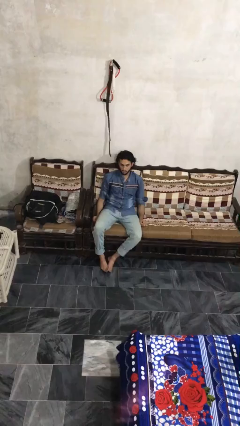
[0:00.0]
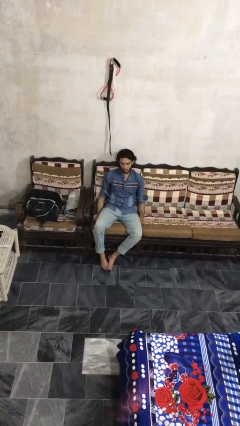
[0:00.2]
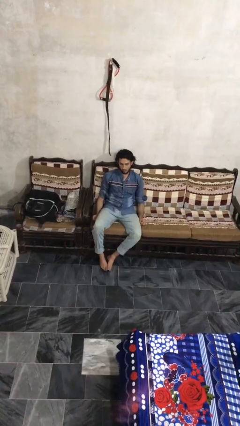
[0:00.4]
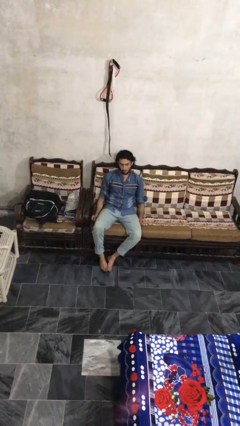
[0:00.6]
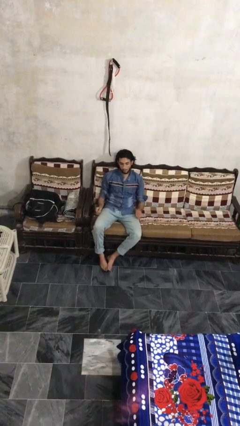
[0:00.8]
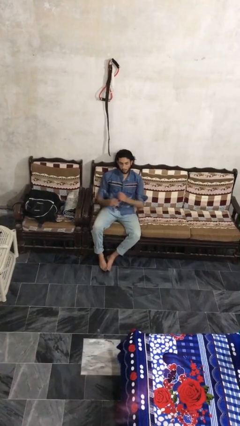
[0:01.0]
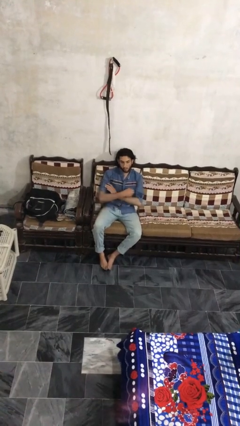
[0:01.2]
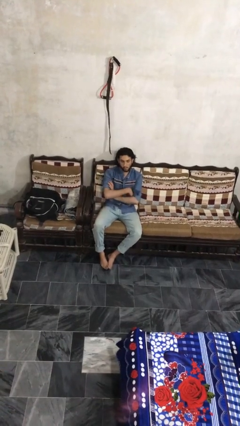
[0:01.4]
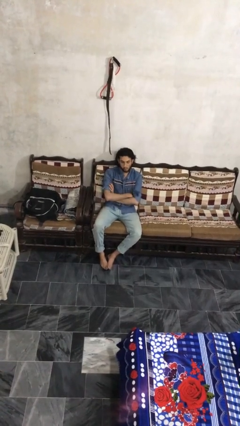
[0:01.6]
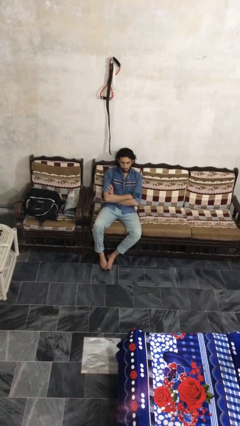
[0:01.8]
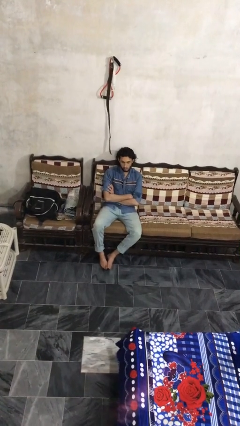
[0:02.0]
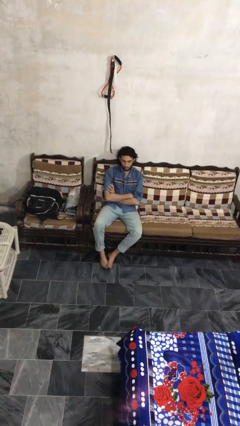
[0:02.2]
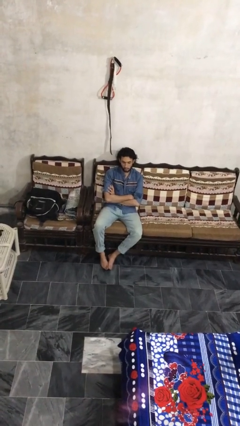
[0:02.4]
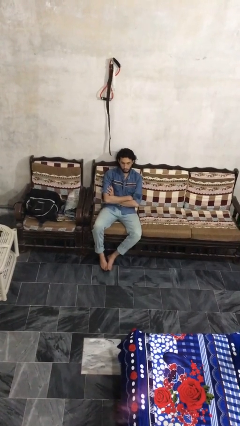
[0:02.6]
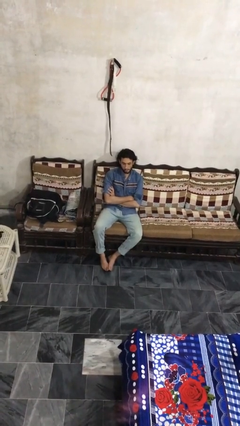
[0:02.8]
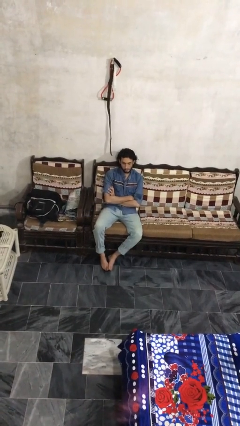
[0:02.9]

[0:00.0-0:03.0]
person crosses arms

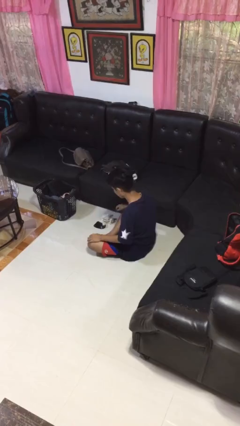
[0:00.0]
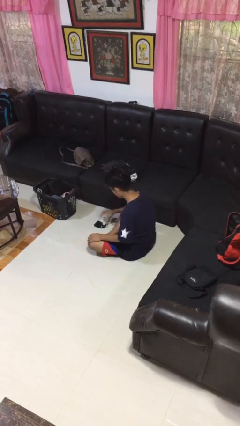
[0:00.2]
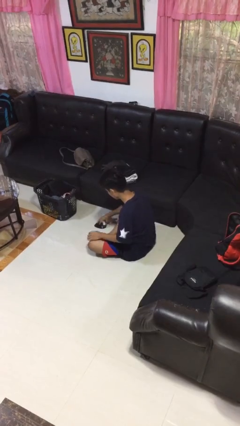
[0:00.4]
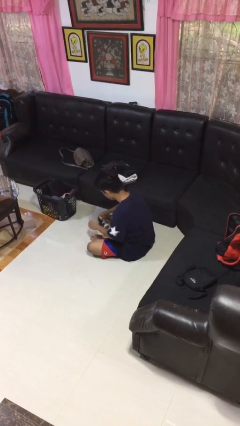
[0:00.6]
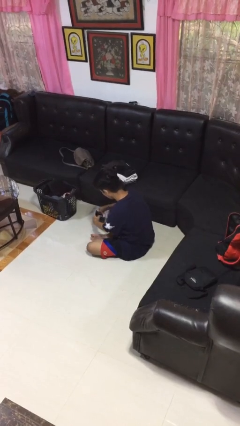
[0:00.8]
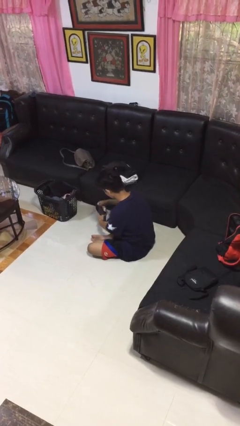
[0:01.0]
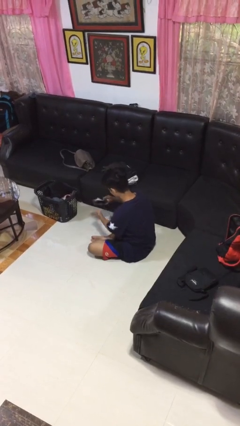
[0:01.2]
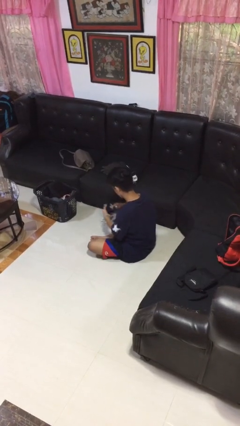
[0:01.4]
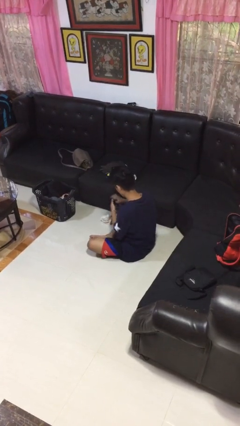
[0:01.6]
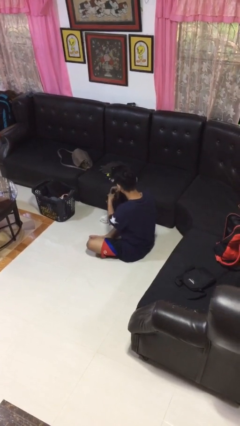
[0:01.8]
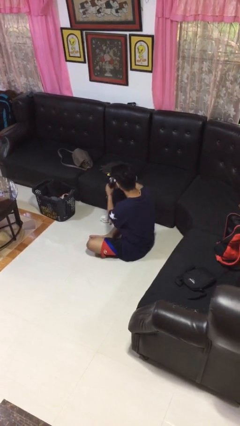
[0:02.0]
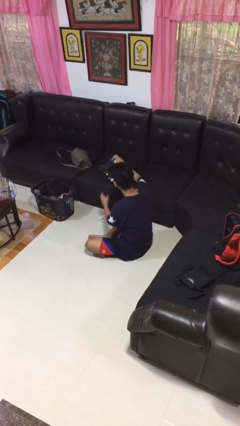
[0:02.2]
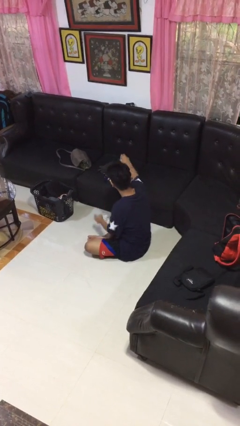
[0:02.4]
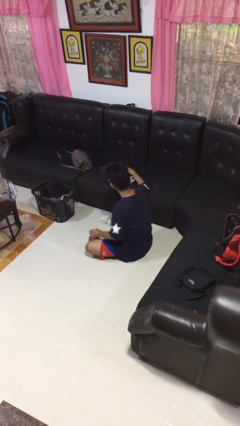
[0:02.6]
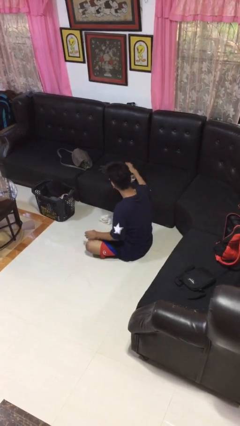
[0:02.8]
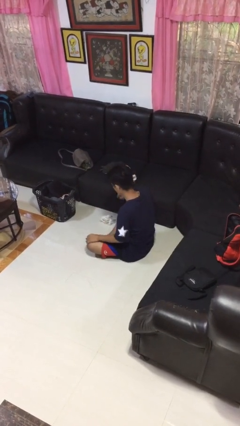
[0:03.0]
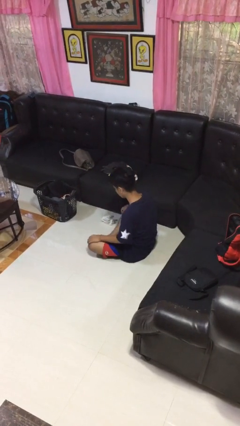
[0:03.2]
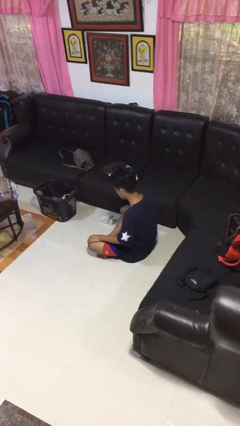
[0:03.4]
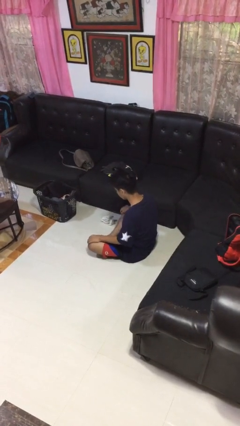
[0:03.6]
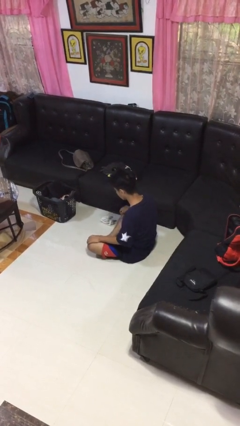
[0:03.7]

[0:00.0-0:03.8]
person folds socks

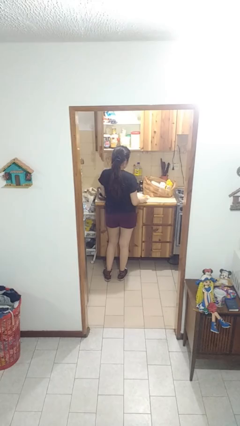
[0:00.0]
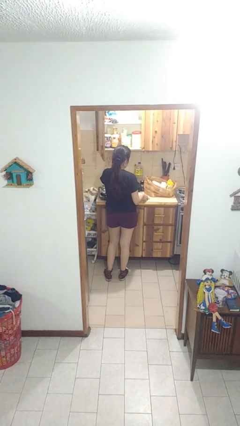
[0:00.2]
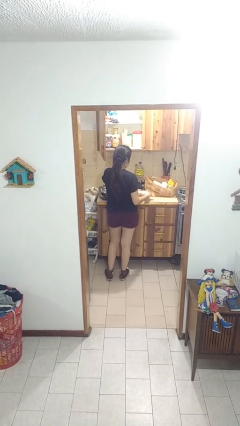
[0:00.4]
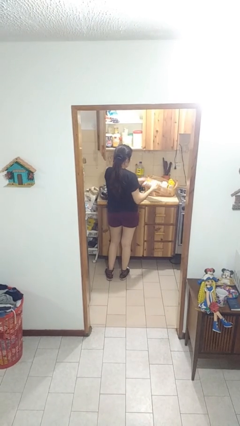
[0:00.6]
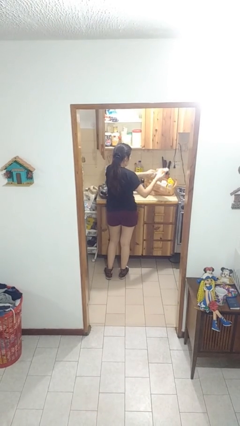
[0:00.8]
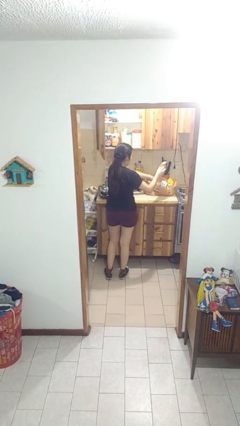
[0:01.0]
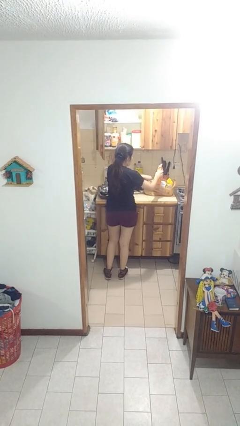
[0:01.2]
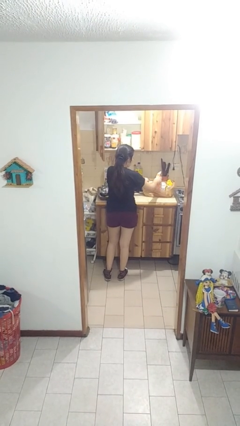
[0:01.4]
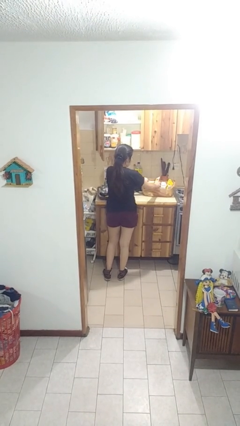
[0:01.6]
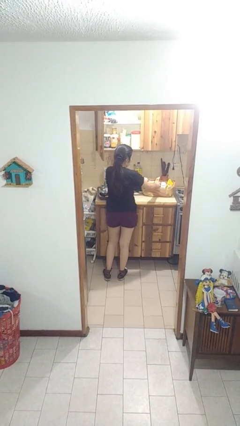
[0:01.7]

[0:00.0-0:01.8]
person puts object into bag

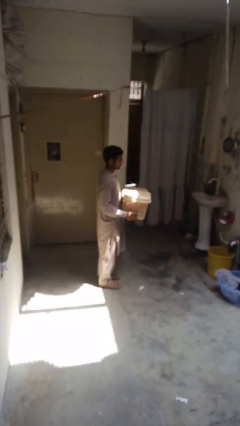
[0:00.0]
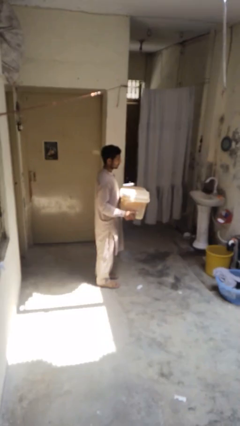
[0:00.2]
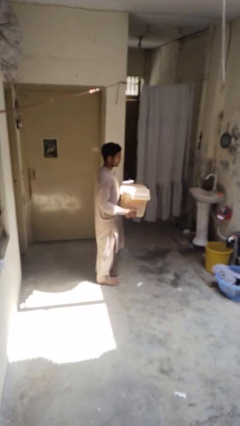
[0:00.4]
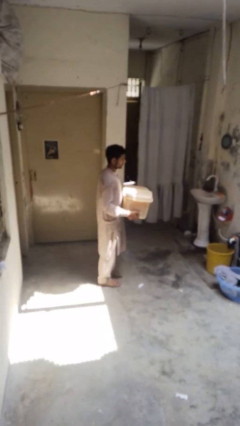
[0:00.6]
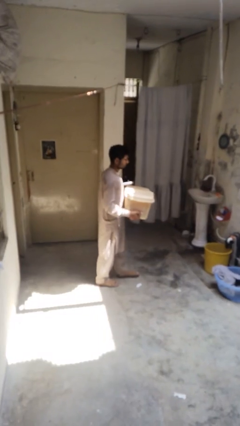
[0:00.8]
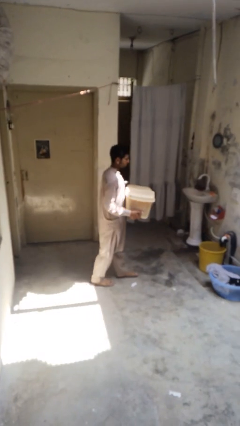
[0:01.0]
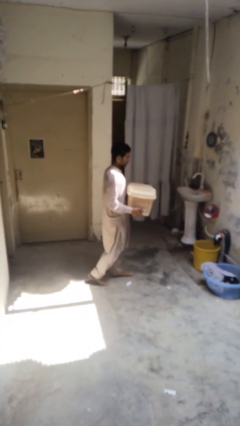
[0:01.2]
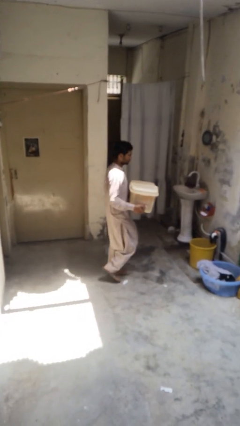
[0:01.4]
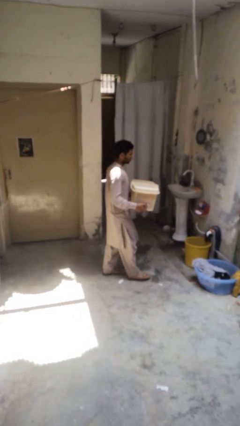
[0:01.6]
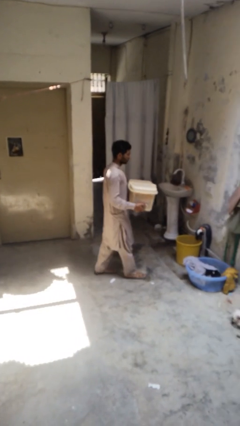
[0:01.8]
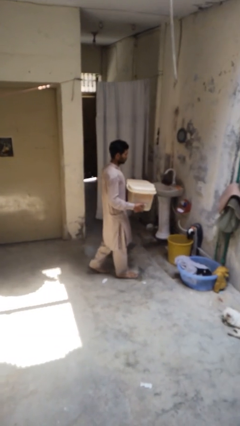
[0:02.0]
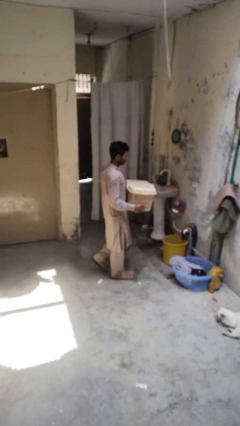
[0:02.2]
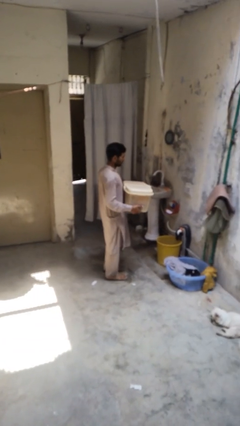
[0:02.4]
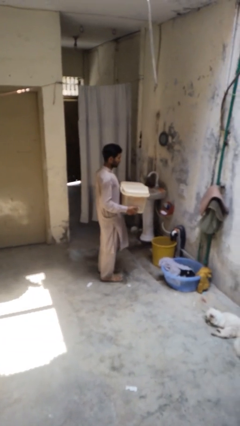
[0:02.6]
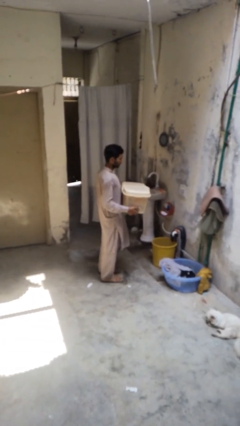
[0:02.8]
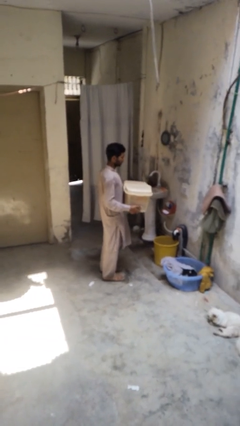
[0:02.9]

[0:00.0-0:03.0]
person carries laundry basket

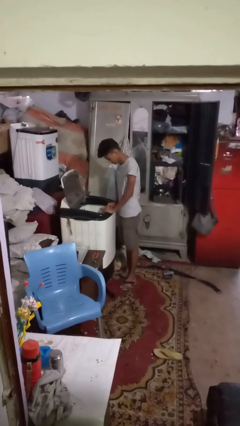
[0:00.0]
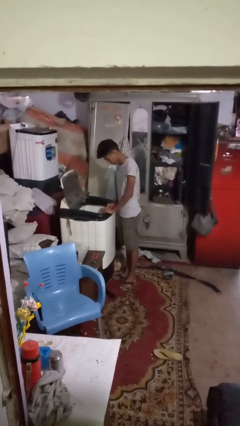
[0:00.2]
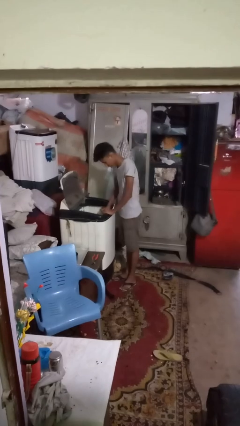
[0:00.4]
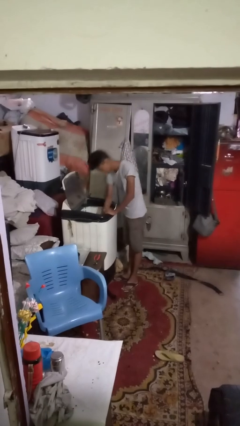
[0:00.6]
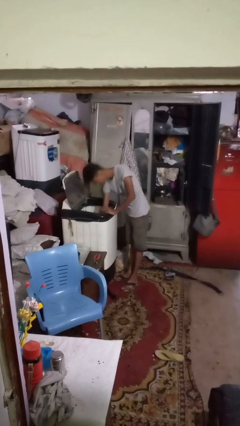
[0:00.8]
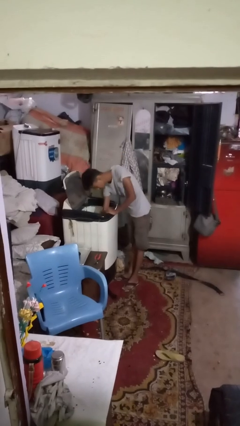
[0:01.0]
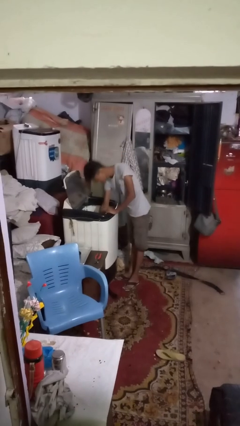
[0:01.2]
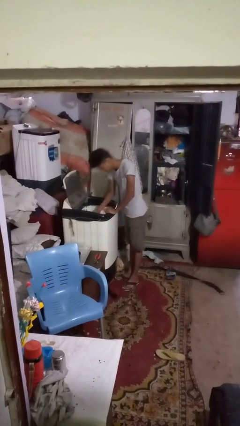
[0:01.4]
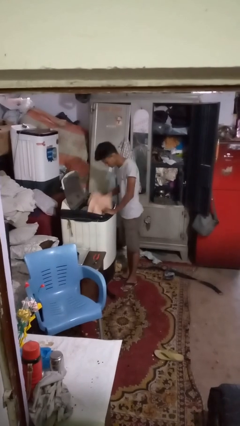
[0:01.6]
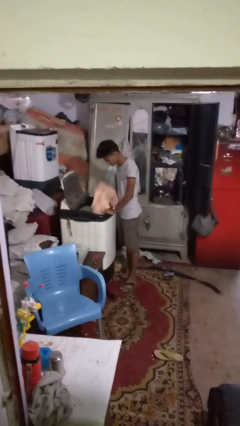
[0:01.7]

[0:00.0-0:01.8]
person unloads clotheswasher

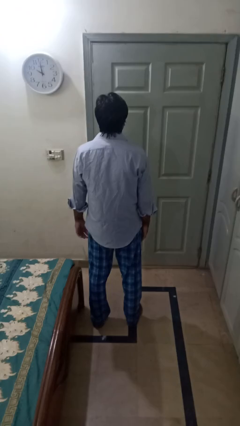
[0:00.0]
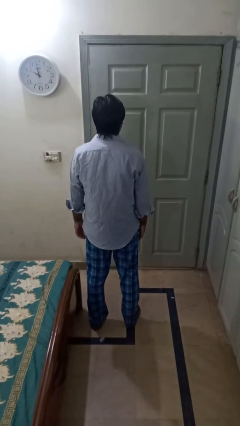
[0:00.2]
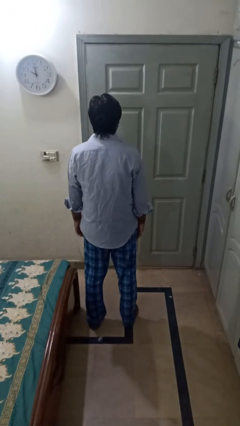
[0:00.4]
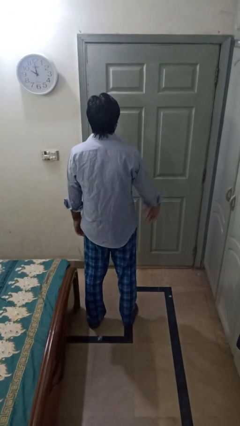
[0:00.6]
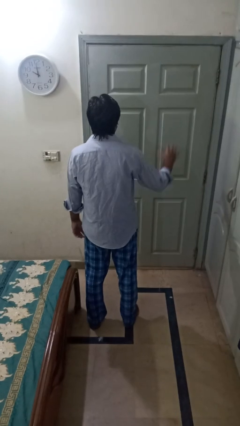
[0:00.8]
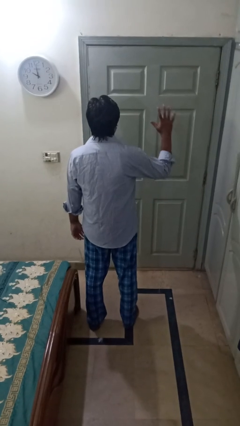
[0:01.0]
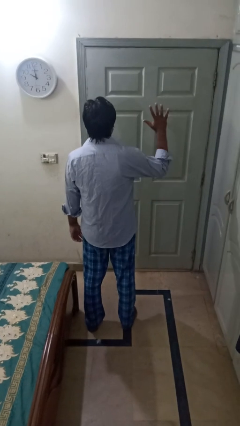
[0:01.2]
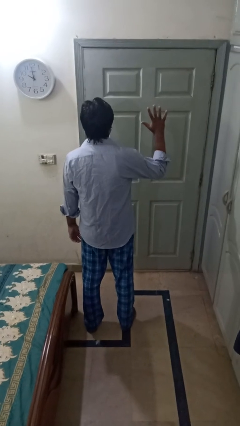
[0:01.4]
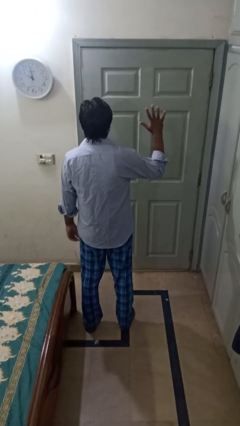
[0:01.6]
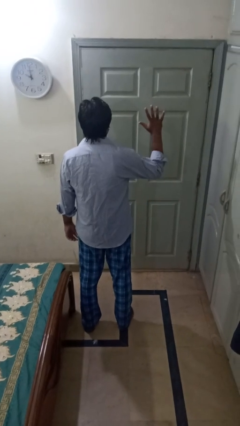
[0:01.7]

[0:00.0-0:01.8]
person gestures number five

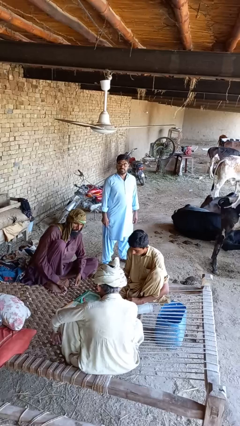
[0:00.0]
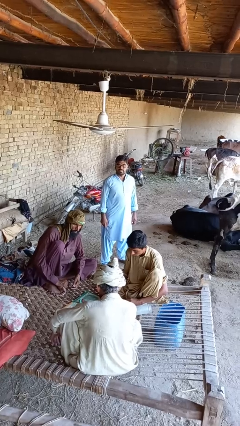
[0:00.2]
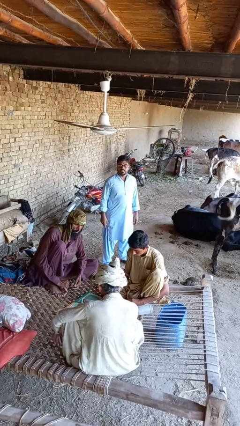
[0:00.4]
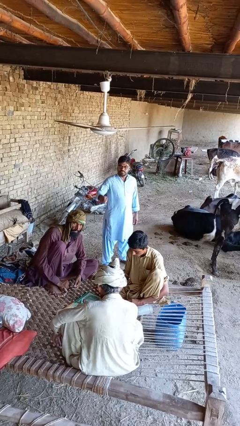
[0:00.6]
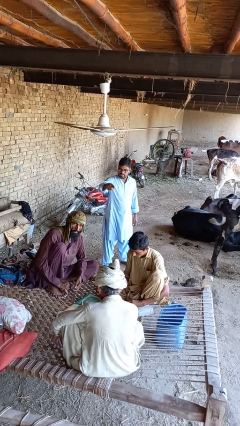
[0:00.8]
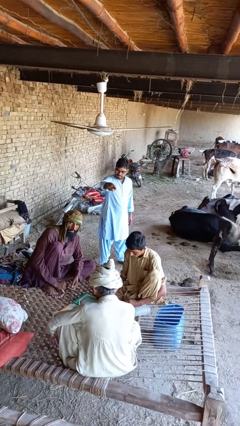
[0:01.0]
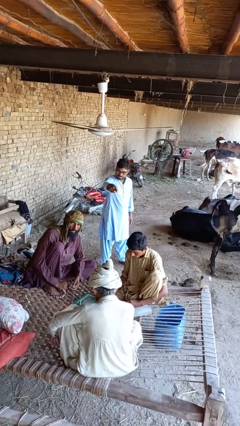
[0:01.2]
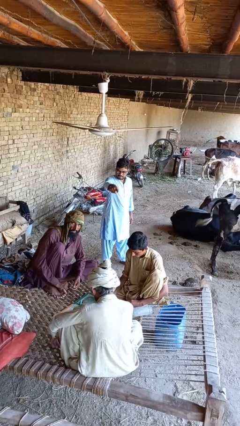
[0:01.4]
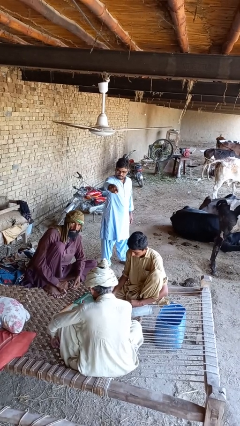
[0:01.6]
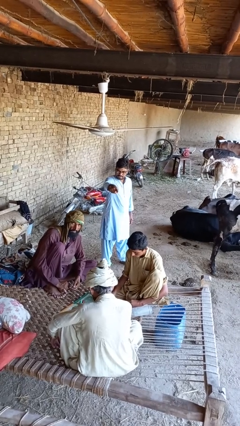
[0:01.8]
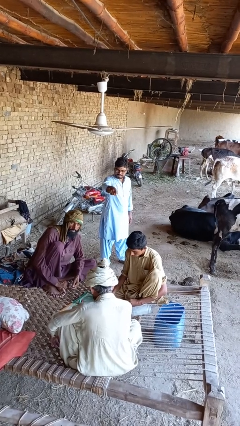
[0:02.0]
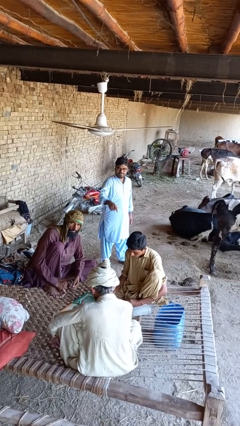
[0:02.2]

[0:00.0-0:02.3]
person points at person
